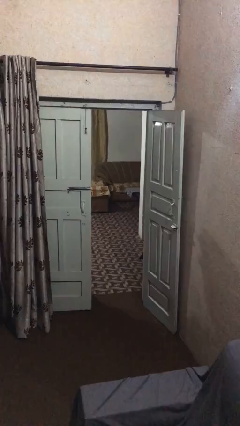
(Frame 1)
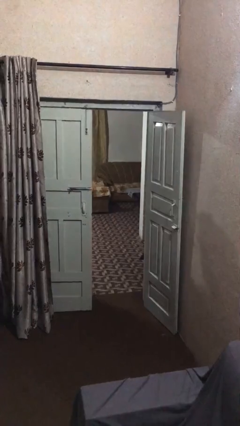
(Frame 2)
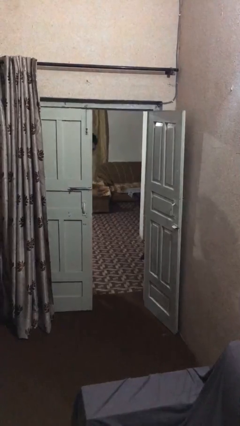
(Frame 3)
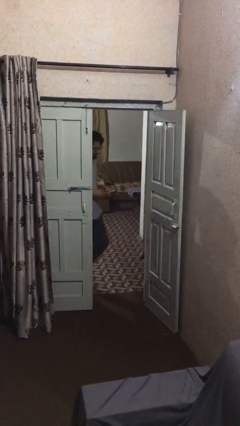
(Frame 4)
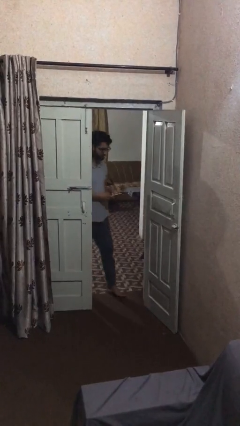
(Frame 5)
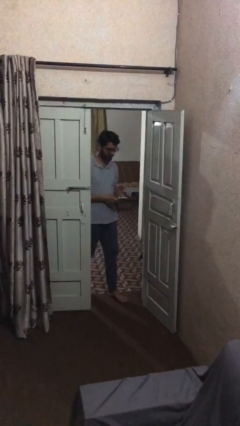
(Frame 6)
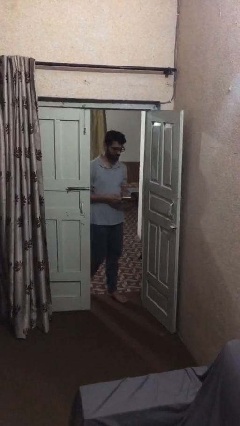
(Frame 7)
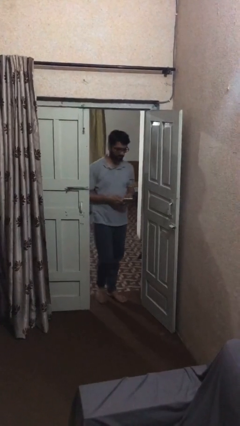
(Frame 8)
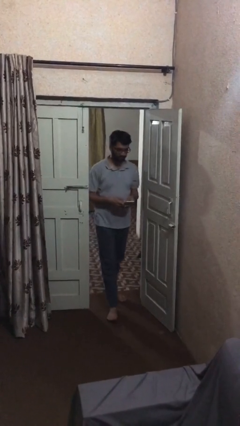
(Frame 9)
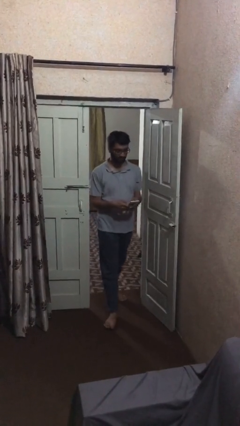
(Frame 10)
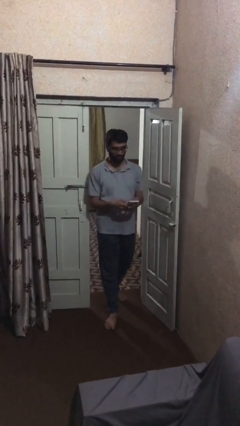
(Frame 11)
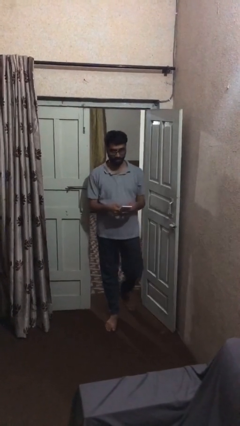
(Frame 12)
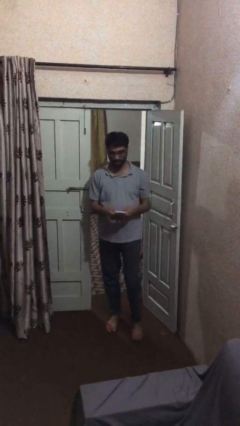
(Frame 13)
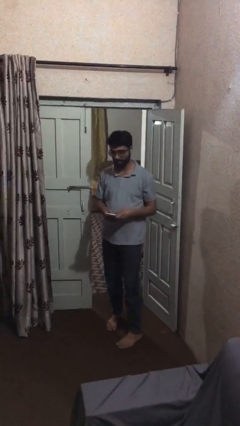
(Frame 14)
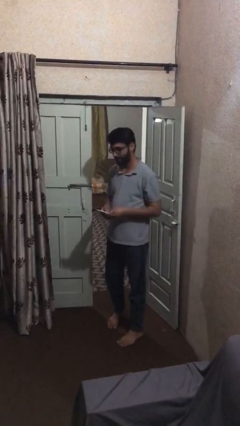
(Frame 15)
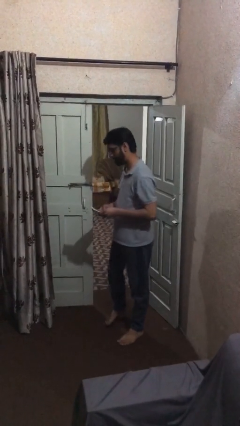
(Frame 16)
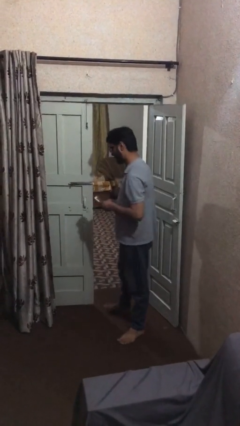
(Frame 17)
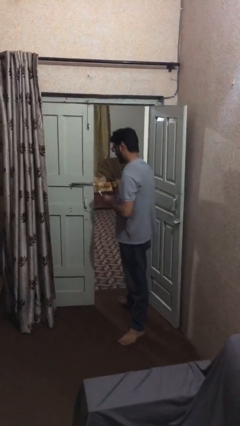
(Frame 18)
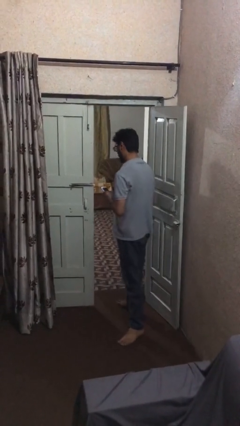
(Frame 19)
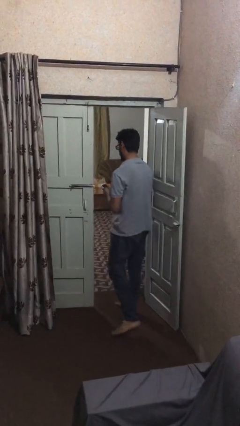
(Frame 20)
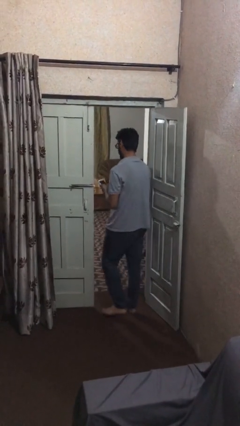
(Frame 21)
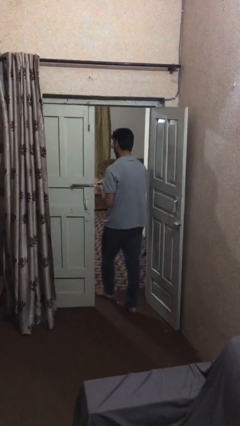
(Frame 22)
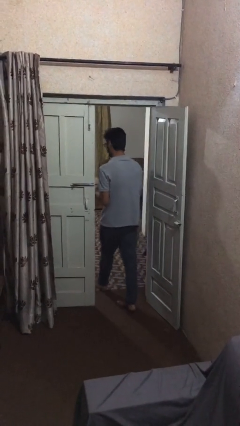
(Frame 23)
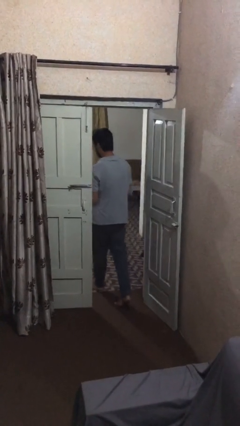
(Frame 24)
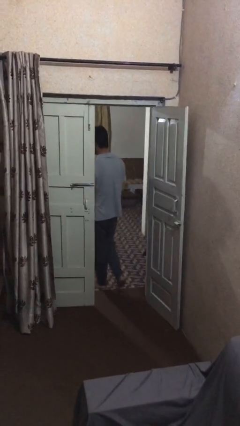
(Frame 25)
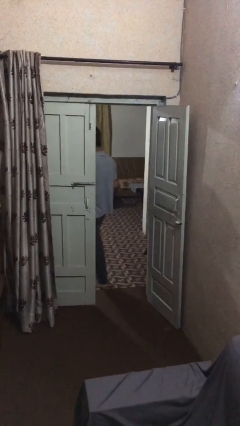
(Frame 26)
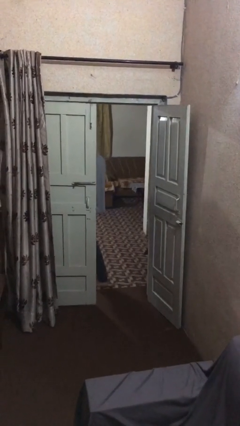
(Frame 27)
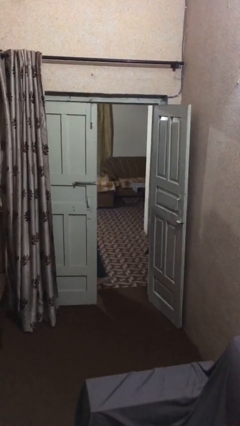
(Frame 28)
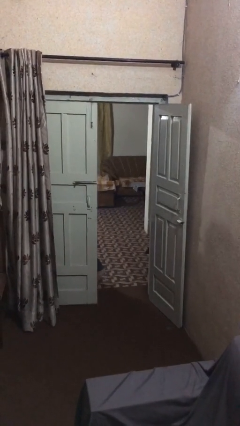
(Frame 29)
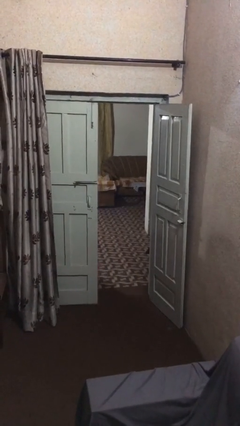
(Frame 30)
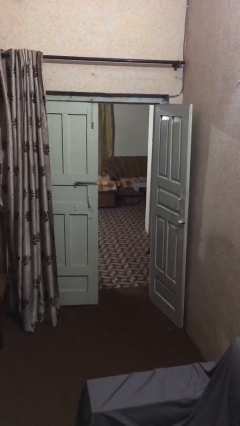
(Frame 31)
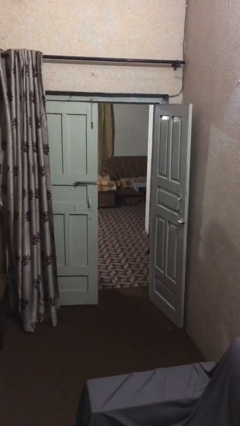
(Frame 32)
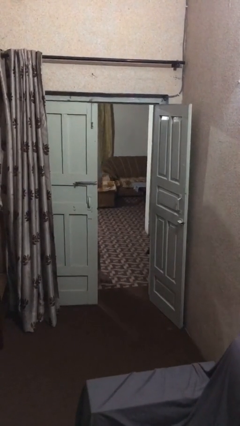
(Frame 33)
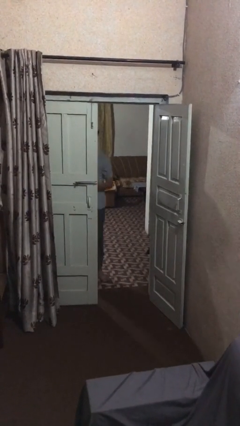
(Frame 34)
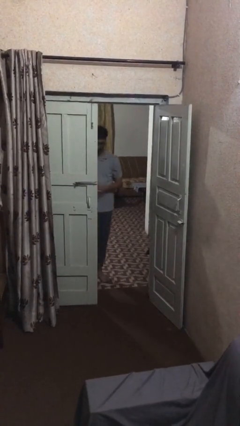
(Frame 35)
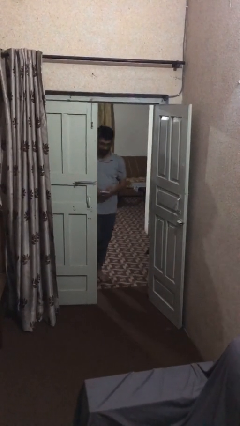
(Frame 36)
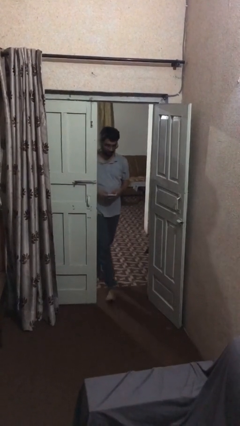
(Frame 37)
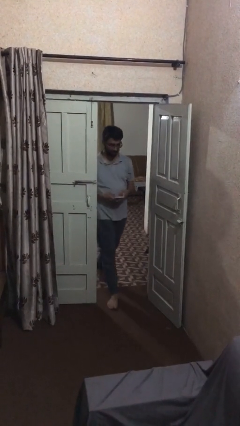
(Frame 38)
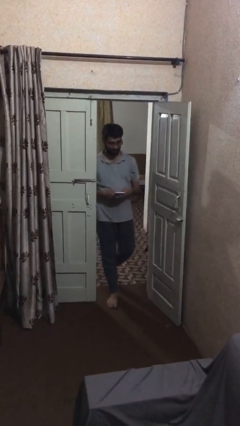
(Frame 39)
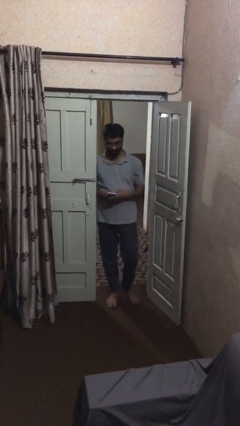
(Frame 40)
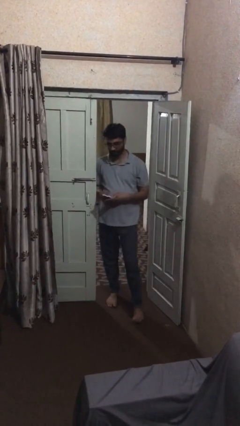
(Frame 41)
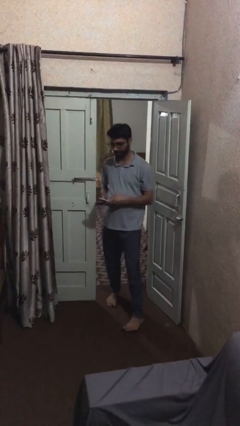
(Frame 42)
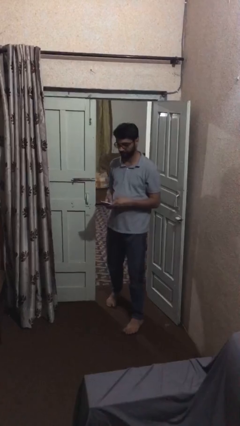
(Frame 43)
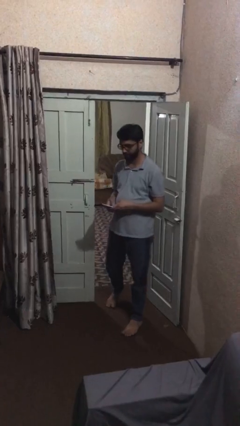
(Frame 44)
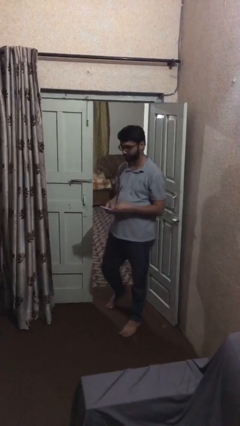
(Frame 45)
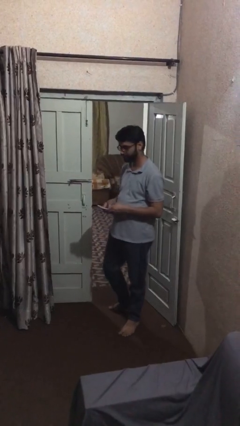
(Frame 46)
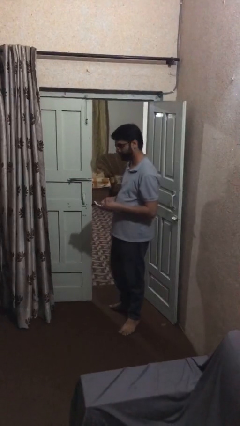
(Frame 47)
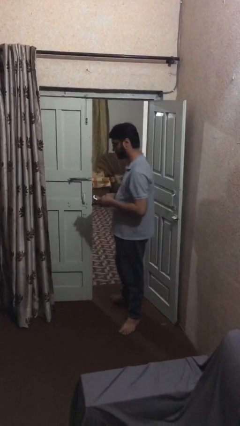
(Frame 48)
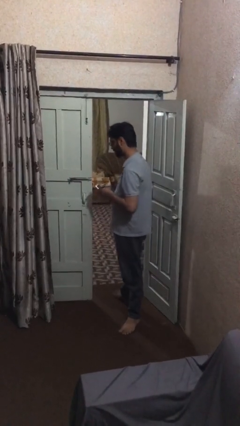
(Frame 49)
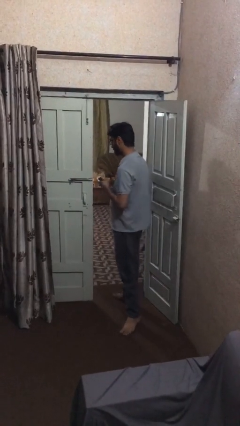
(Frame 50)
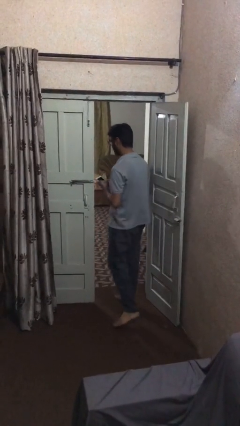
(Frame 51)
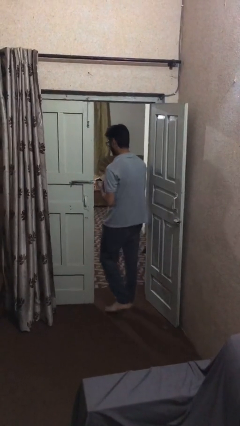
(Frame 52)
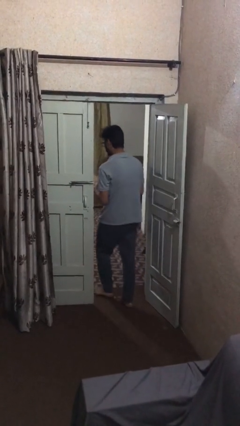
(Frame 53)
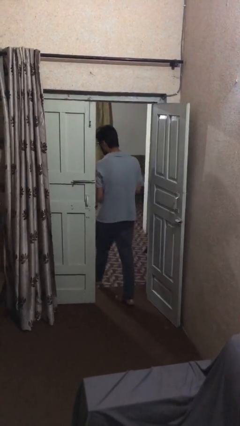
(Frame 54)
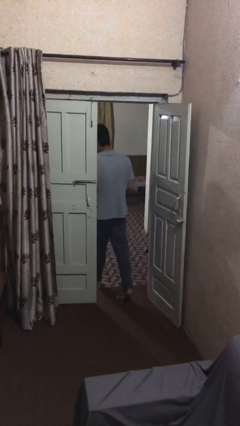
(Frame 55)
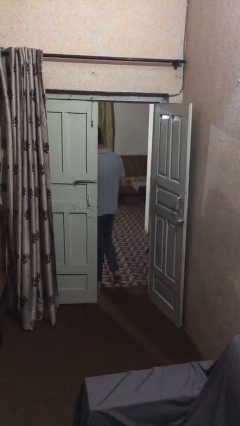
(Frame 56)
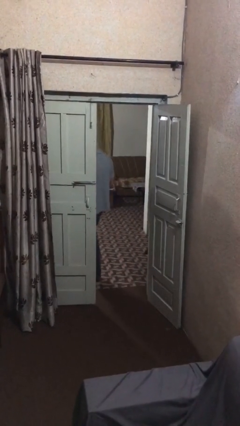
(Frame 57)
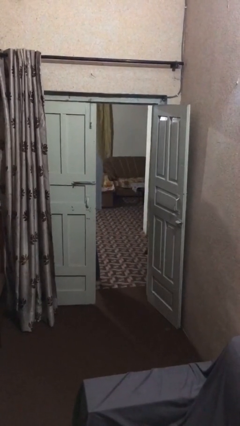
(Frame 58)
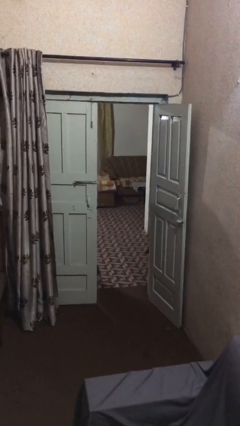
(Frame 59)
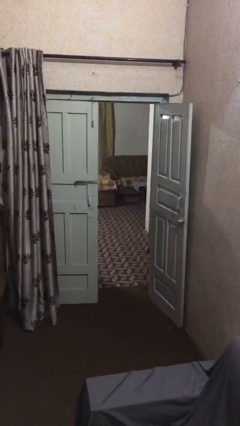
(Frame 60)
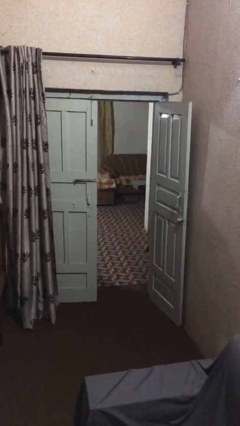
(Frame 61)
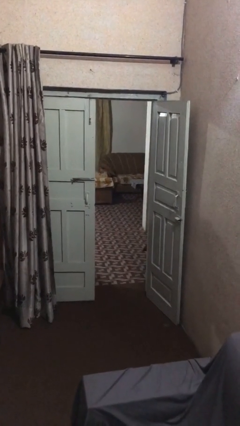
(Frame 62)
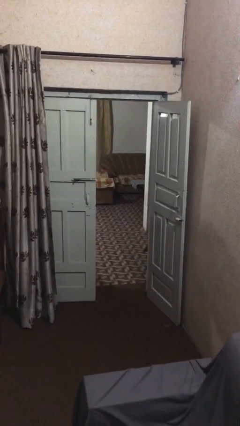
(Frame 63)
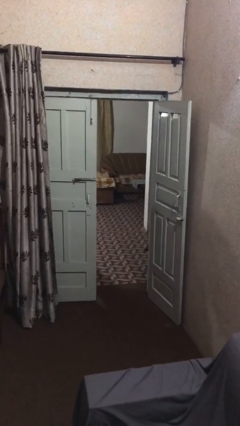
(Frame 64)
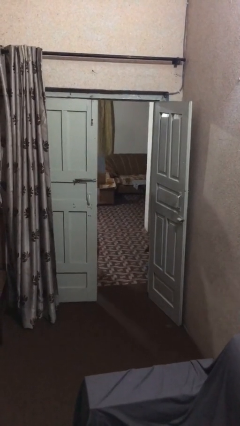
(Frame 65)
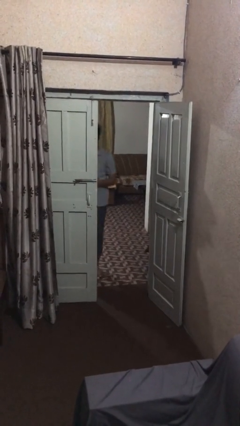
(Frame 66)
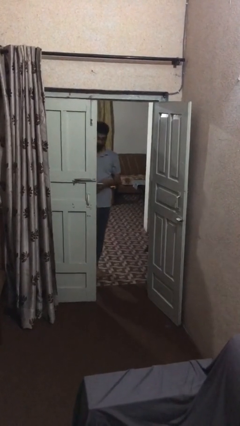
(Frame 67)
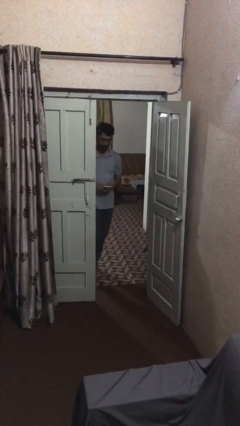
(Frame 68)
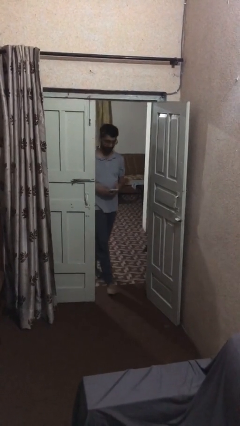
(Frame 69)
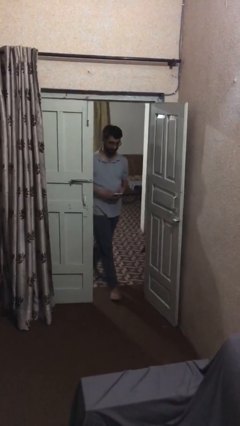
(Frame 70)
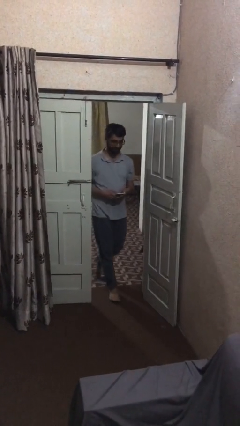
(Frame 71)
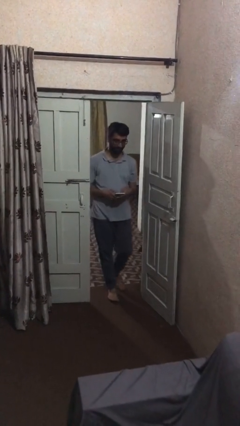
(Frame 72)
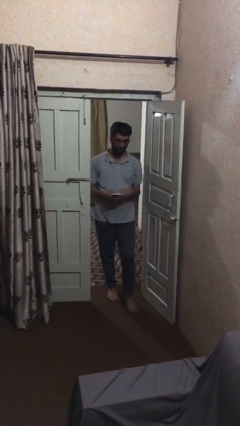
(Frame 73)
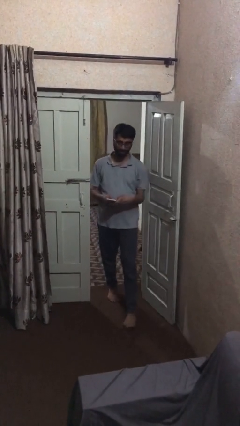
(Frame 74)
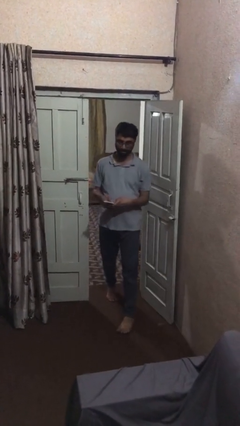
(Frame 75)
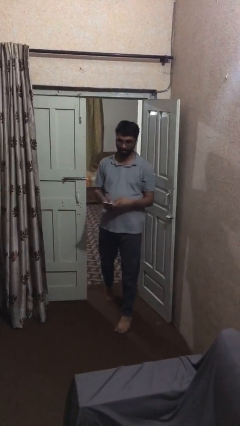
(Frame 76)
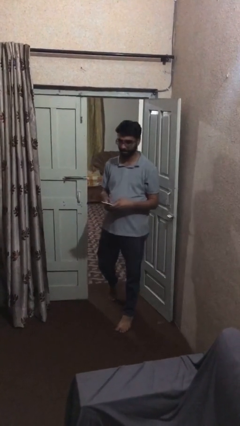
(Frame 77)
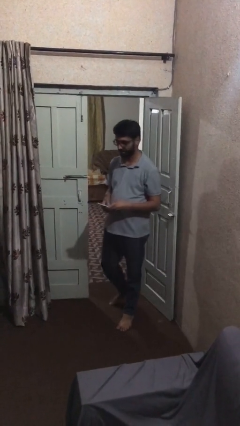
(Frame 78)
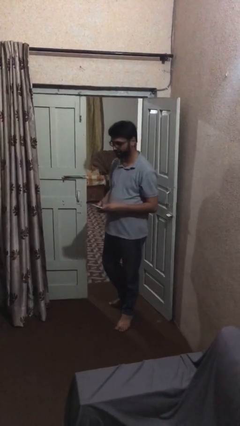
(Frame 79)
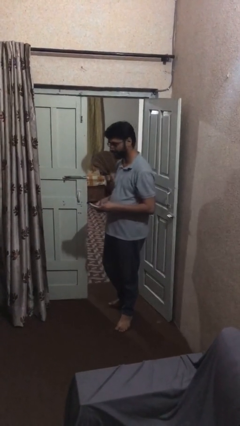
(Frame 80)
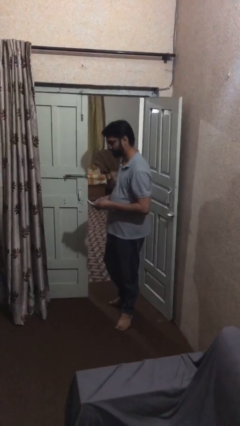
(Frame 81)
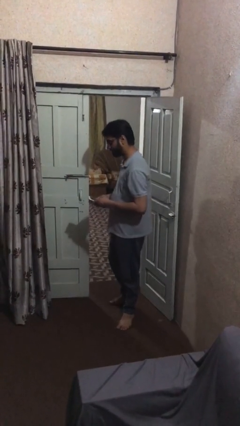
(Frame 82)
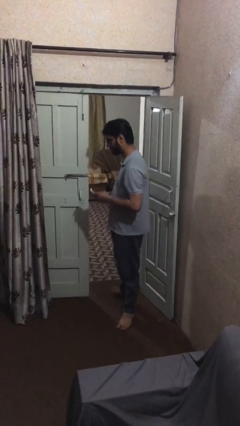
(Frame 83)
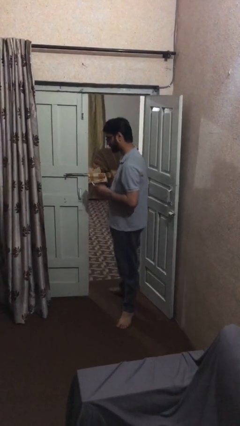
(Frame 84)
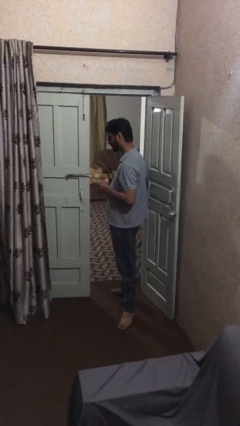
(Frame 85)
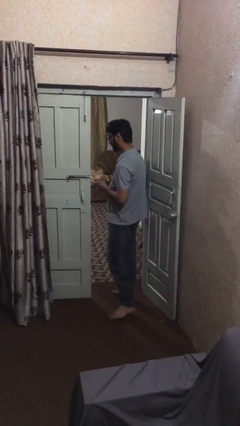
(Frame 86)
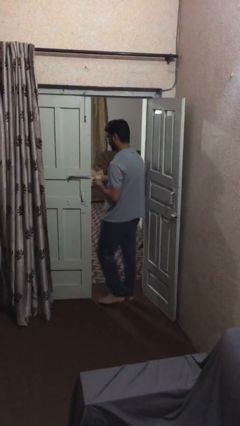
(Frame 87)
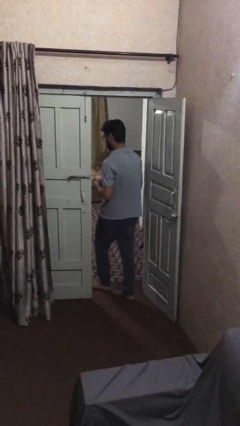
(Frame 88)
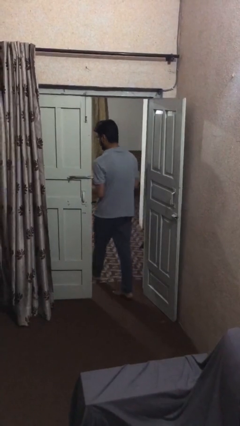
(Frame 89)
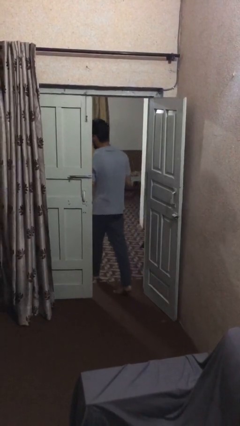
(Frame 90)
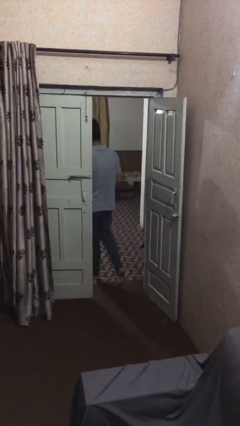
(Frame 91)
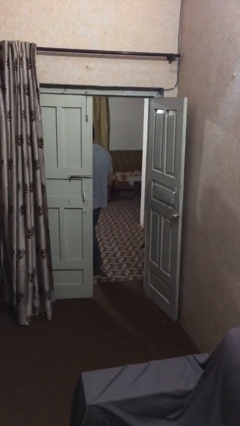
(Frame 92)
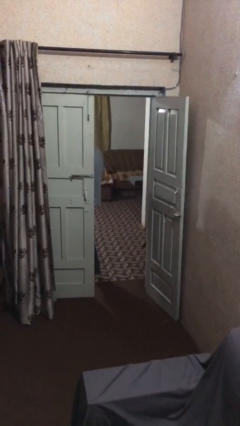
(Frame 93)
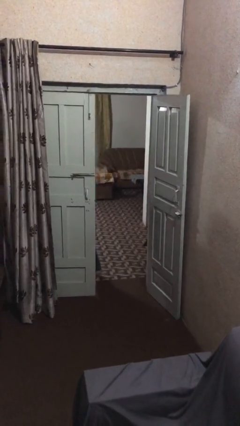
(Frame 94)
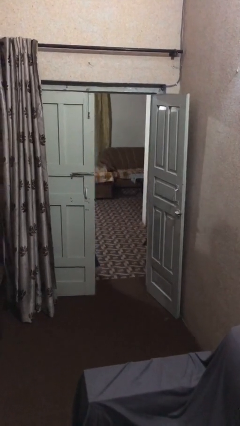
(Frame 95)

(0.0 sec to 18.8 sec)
person texts on phone
